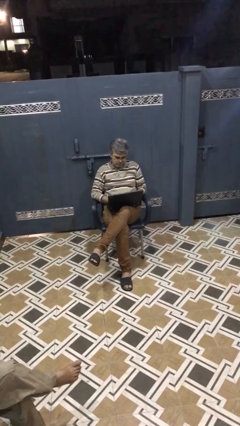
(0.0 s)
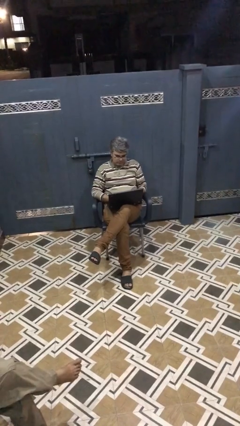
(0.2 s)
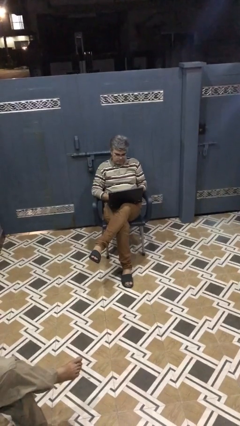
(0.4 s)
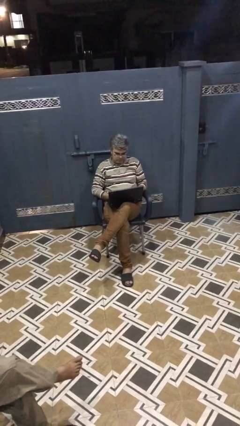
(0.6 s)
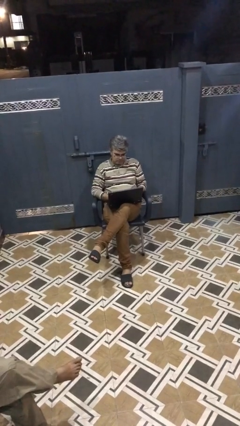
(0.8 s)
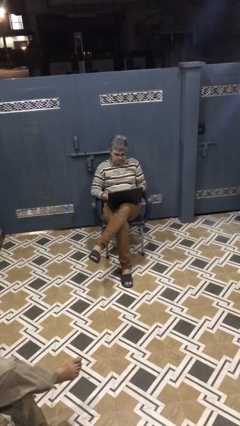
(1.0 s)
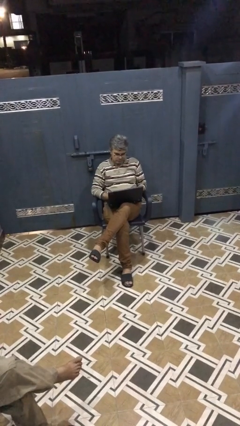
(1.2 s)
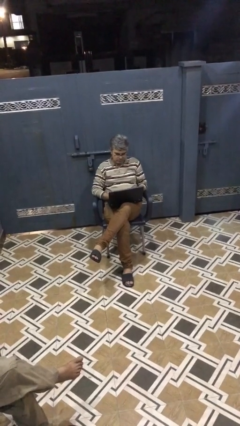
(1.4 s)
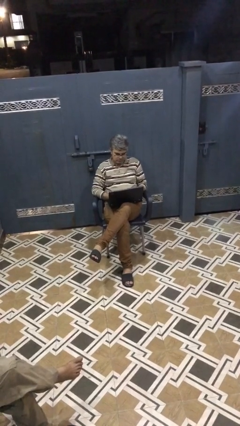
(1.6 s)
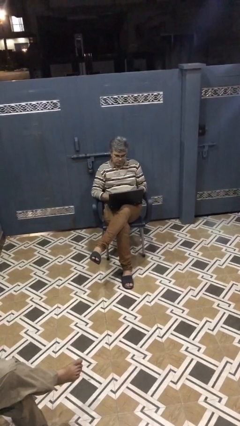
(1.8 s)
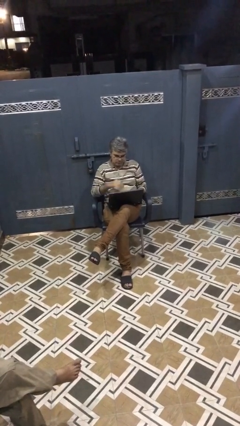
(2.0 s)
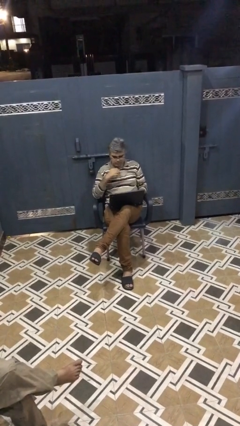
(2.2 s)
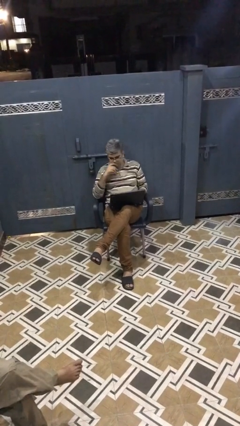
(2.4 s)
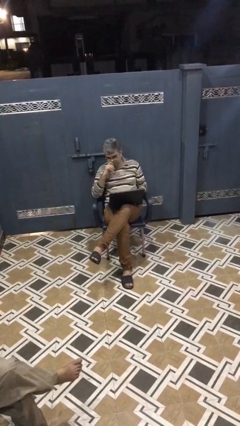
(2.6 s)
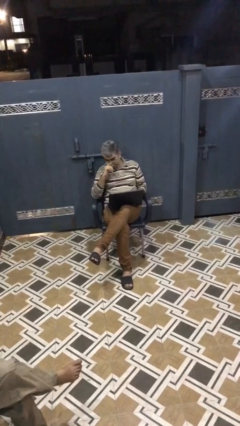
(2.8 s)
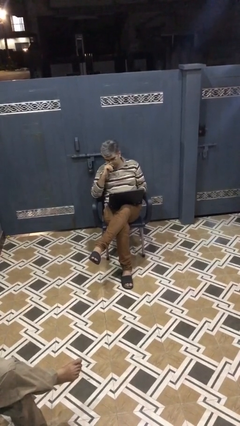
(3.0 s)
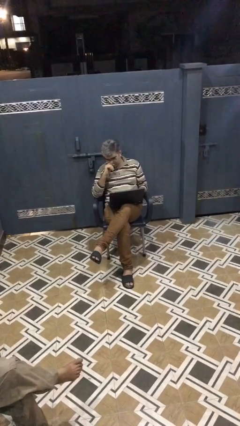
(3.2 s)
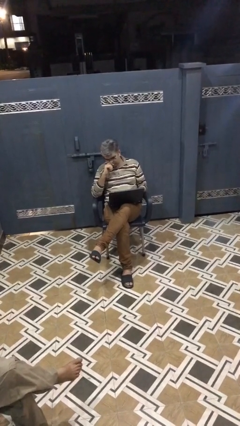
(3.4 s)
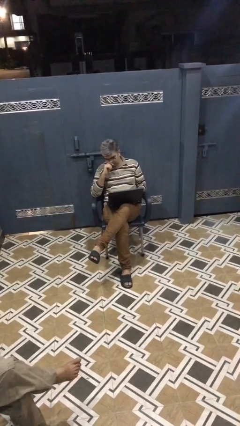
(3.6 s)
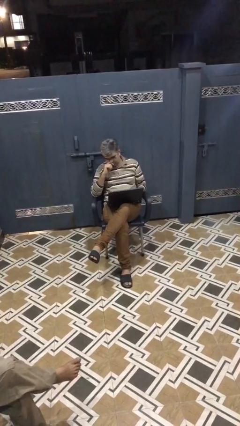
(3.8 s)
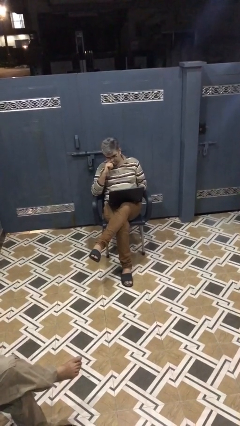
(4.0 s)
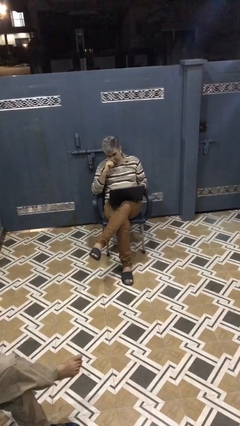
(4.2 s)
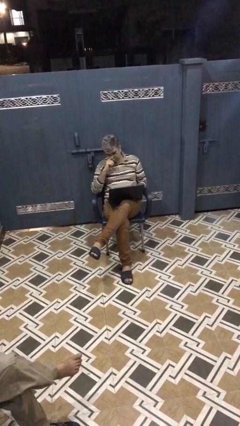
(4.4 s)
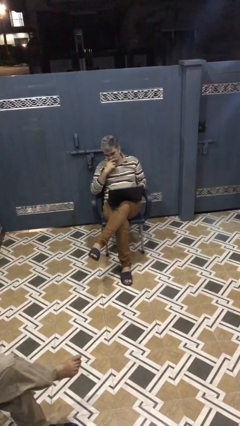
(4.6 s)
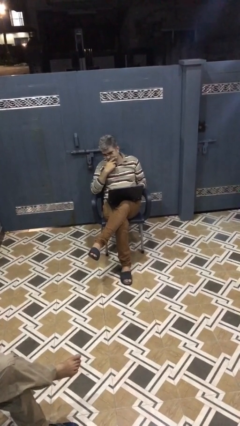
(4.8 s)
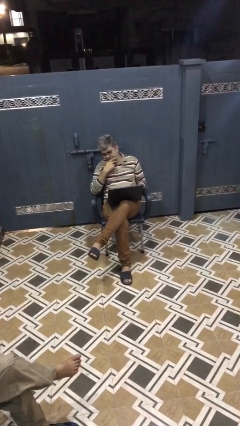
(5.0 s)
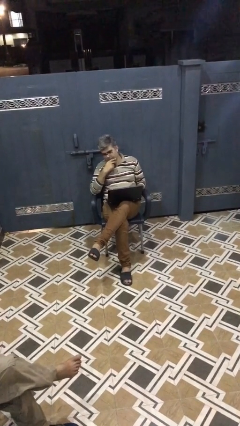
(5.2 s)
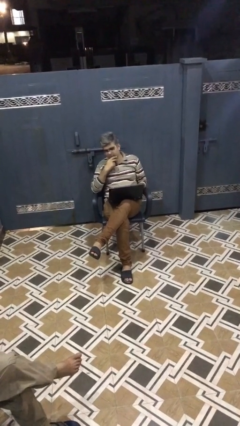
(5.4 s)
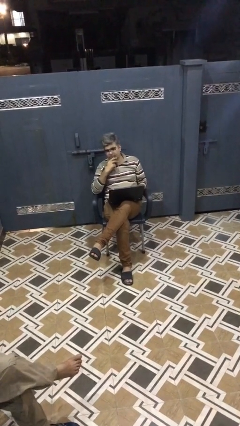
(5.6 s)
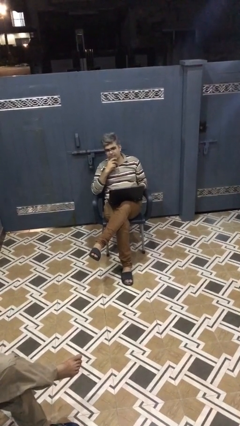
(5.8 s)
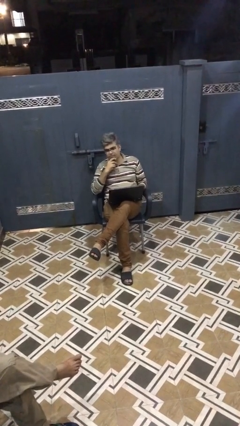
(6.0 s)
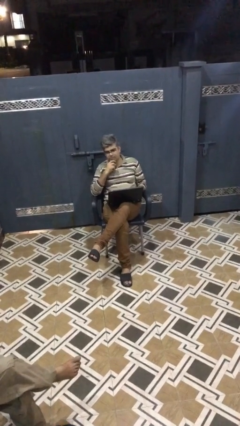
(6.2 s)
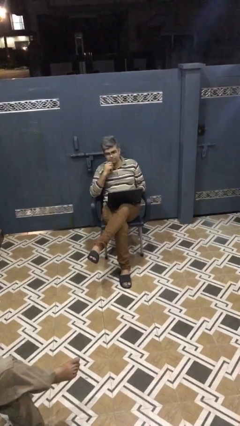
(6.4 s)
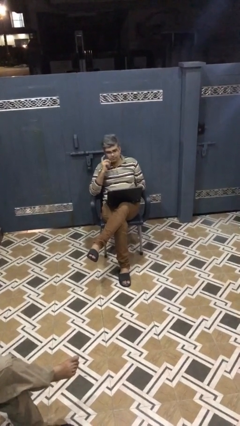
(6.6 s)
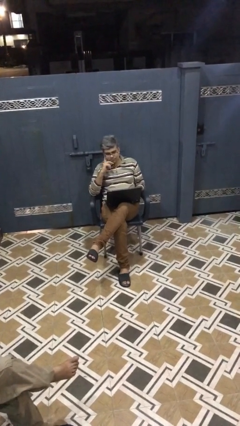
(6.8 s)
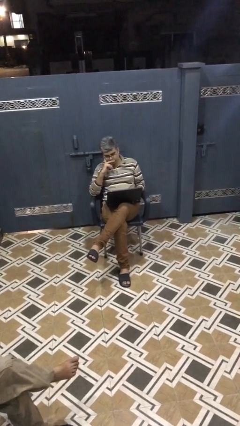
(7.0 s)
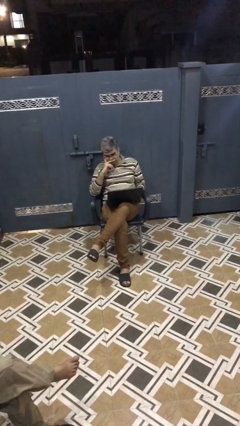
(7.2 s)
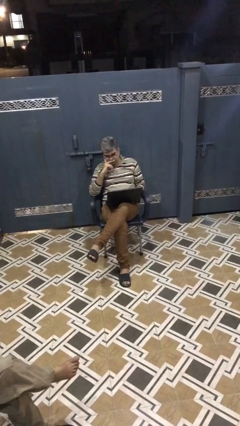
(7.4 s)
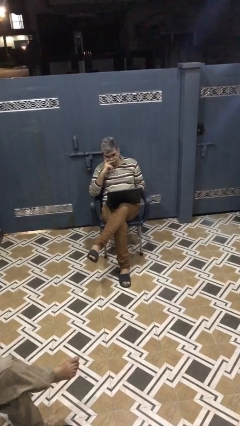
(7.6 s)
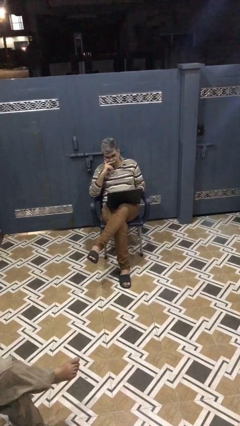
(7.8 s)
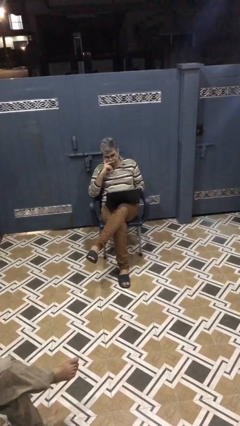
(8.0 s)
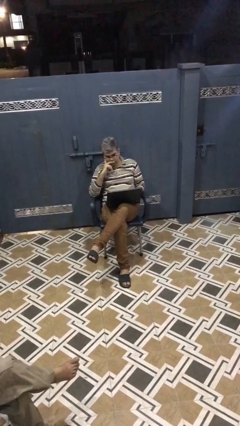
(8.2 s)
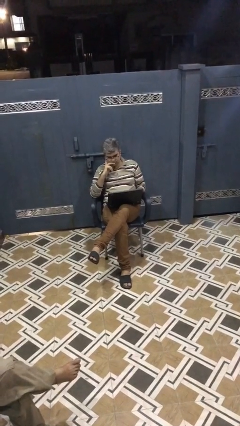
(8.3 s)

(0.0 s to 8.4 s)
person interacts with laptop

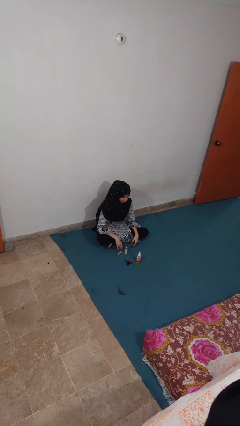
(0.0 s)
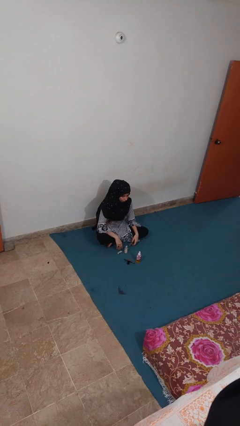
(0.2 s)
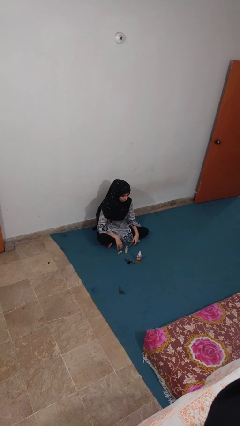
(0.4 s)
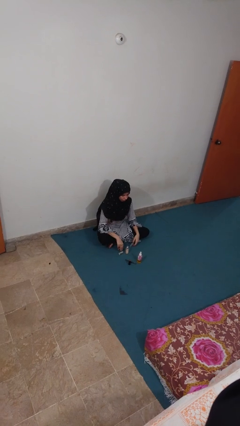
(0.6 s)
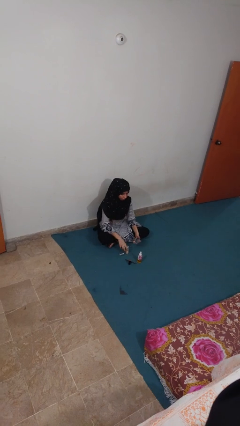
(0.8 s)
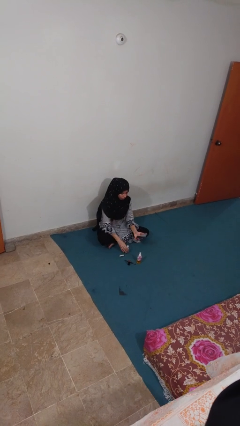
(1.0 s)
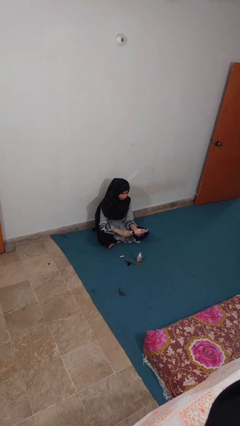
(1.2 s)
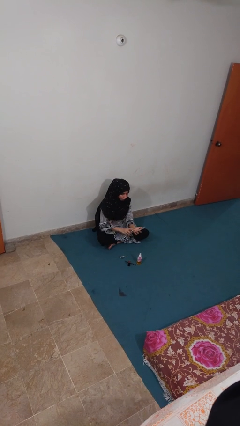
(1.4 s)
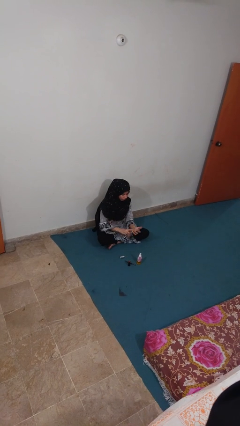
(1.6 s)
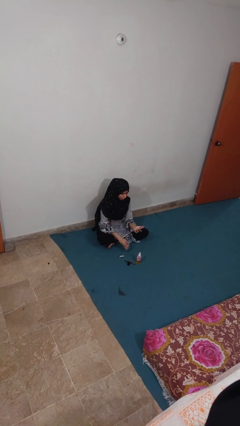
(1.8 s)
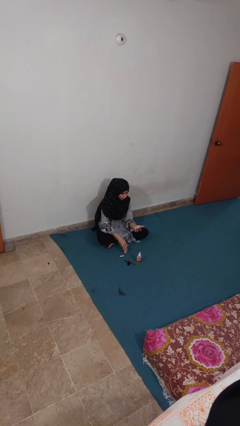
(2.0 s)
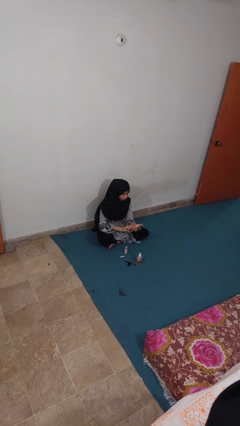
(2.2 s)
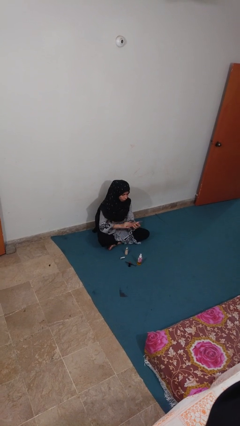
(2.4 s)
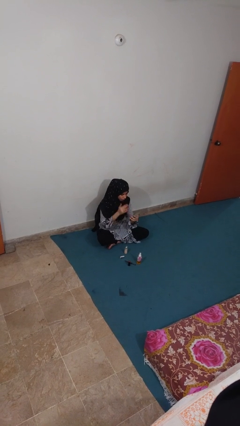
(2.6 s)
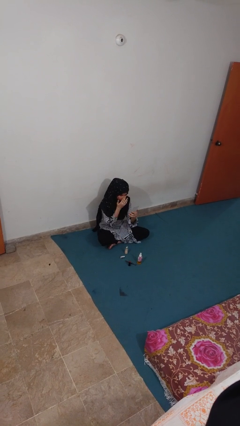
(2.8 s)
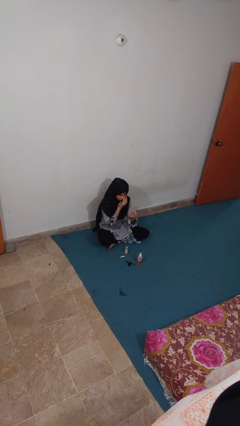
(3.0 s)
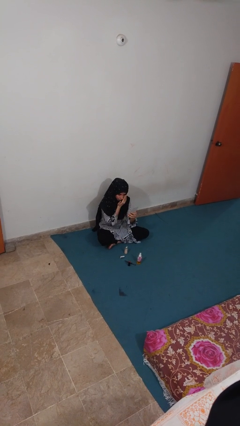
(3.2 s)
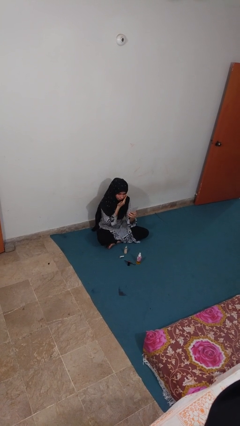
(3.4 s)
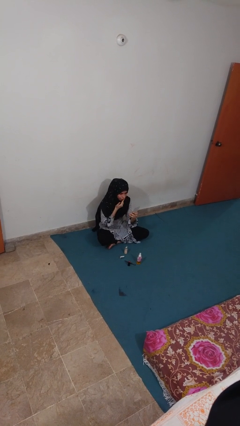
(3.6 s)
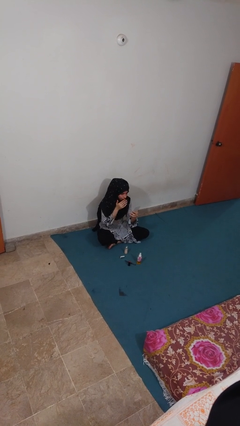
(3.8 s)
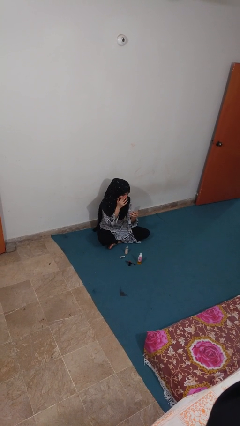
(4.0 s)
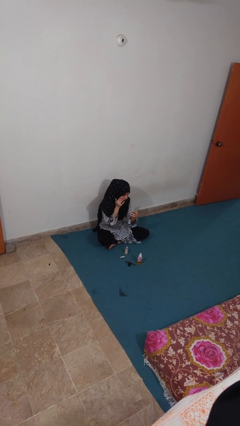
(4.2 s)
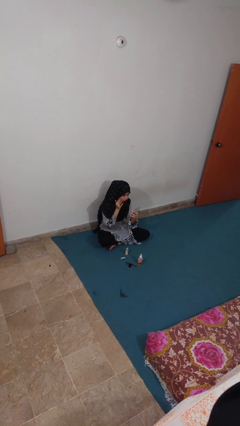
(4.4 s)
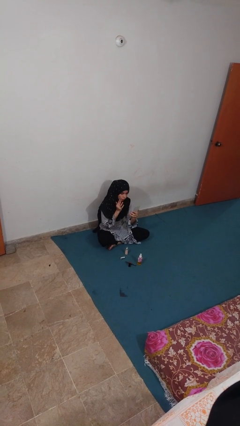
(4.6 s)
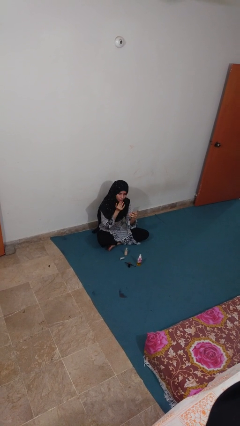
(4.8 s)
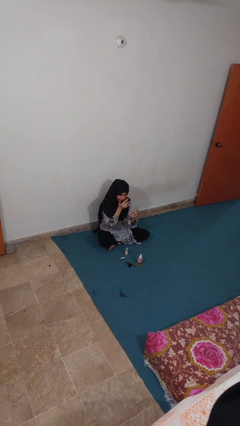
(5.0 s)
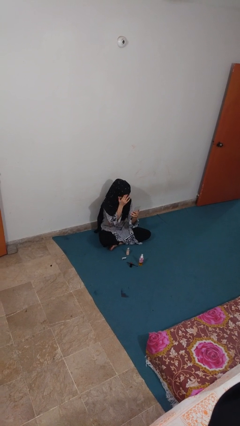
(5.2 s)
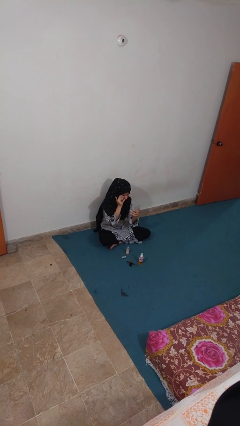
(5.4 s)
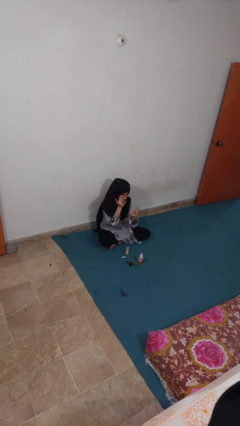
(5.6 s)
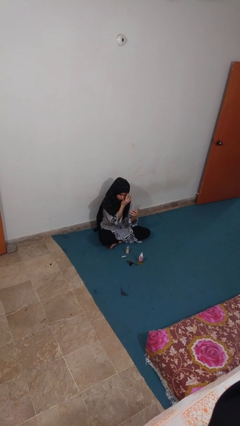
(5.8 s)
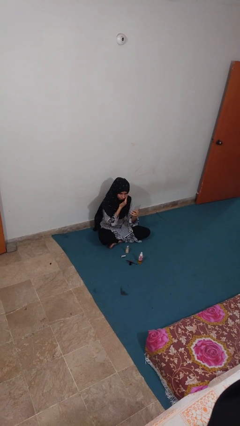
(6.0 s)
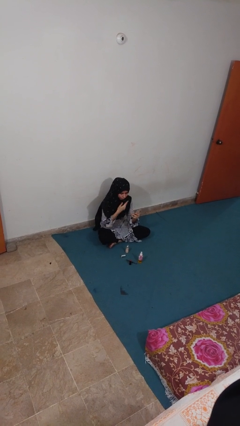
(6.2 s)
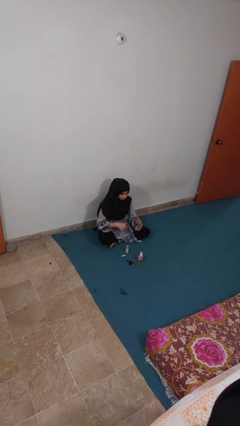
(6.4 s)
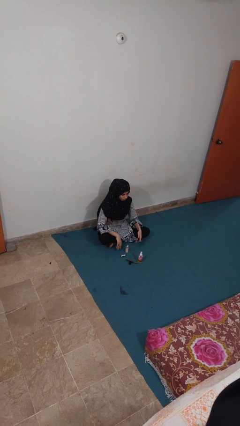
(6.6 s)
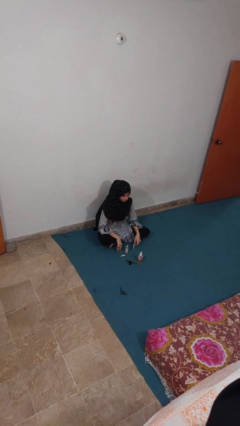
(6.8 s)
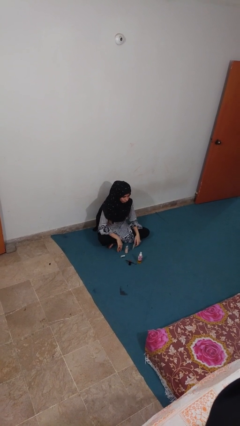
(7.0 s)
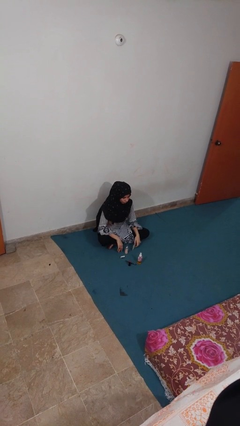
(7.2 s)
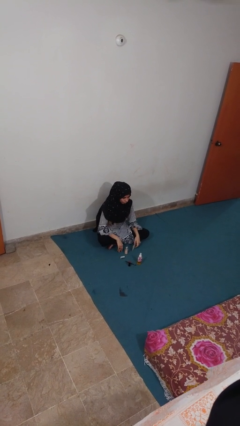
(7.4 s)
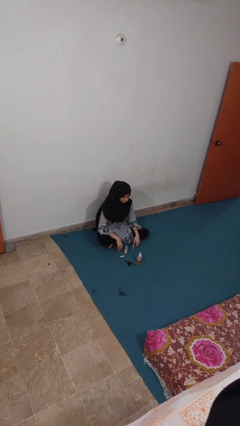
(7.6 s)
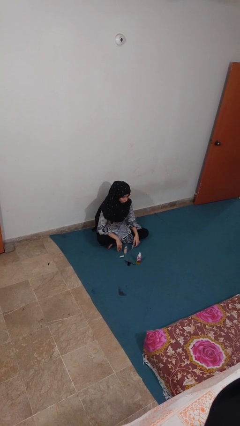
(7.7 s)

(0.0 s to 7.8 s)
person applies foundation makeup

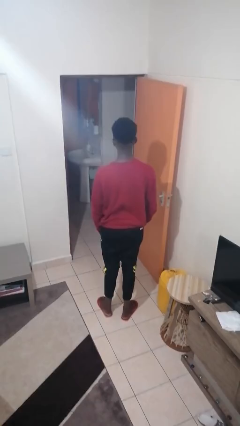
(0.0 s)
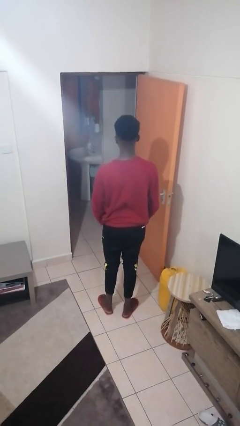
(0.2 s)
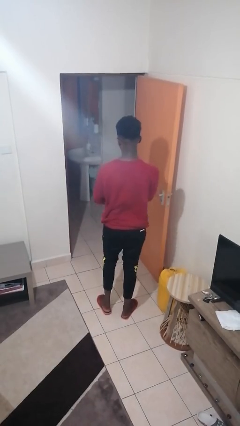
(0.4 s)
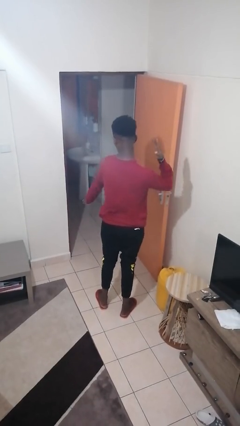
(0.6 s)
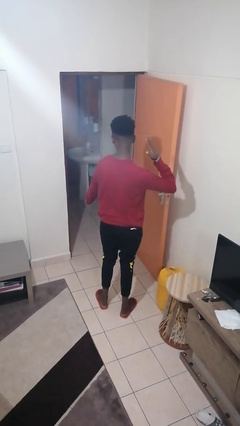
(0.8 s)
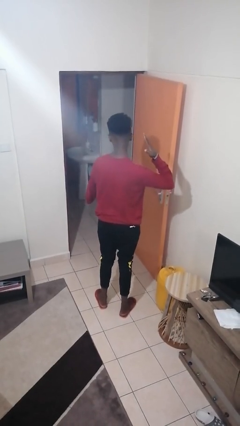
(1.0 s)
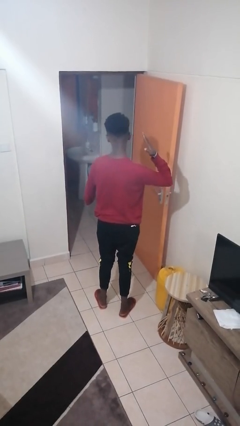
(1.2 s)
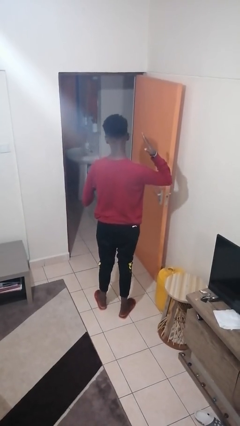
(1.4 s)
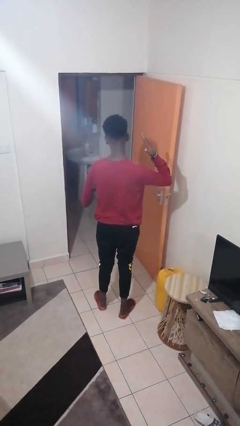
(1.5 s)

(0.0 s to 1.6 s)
person karate chop
